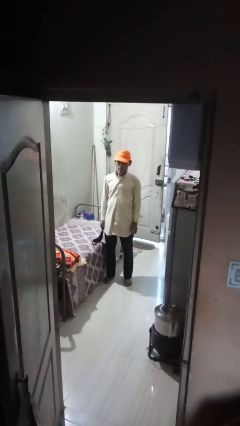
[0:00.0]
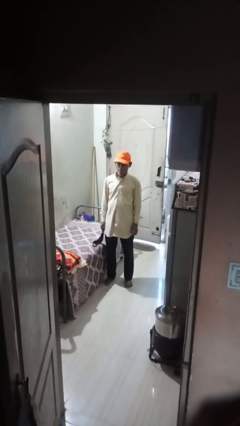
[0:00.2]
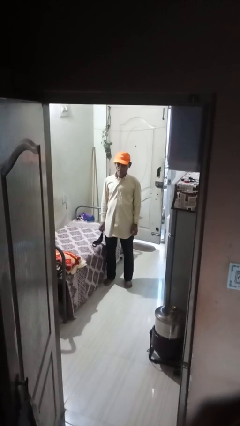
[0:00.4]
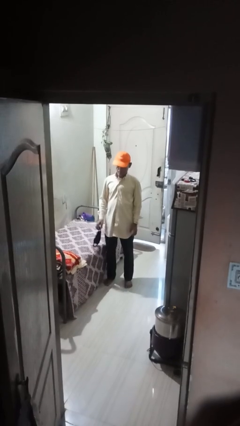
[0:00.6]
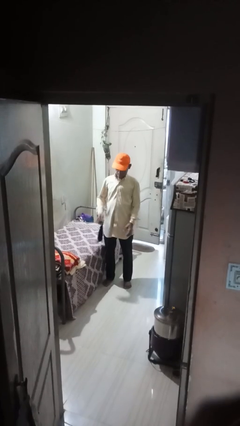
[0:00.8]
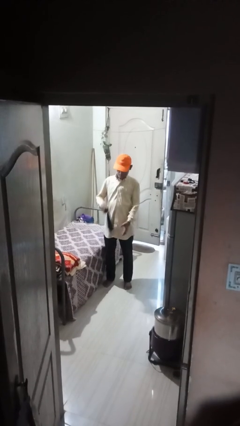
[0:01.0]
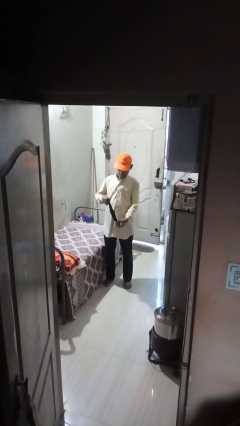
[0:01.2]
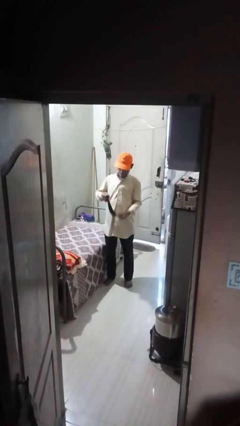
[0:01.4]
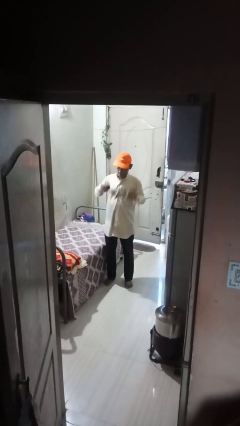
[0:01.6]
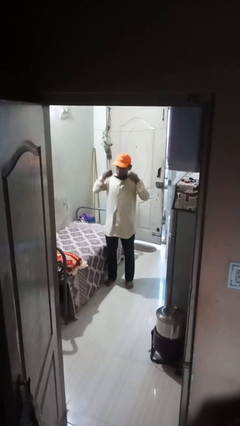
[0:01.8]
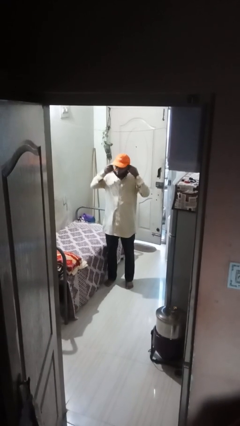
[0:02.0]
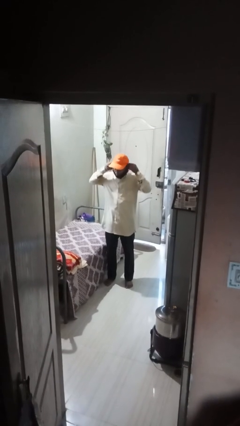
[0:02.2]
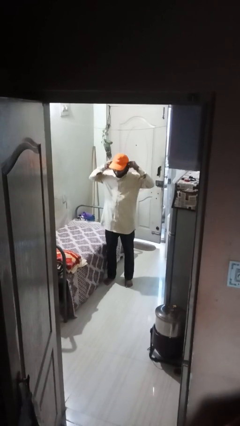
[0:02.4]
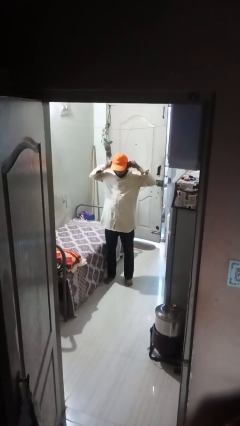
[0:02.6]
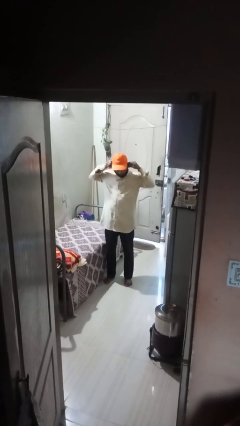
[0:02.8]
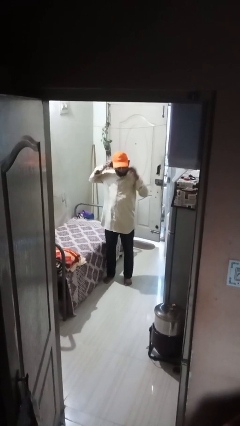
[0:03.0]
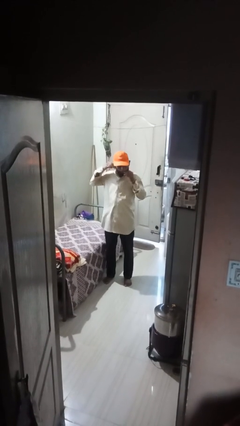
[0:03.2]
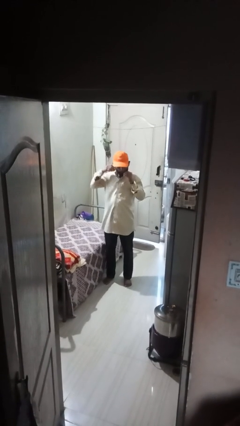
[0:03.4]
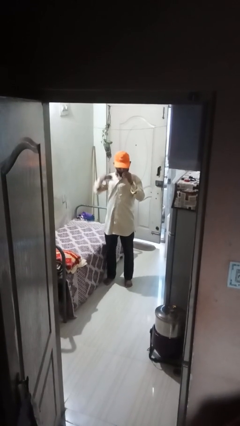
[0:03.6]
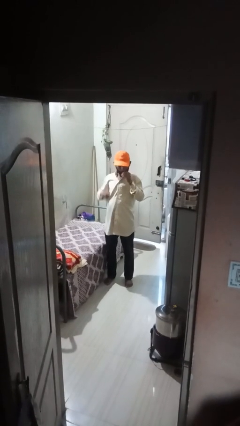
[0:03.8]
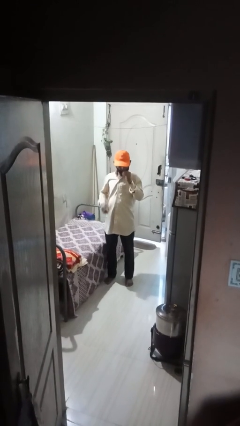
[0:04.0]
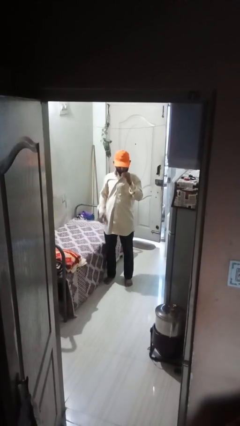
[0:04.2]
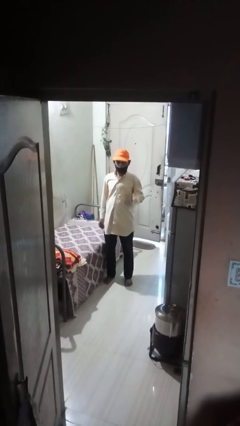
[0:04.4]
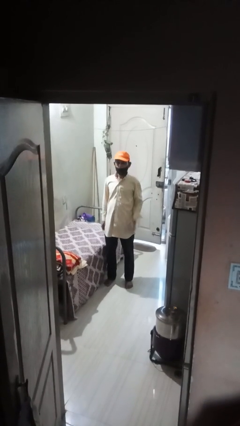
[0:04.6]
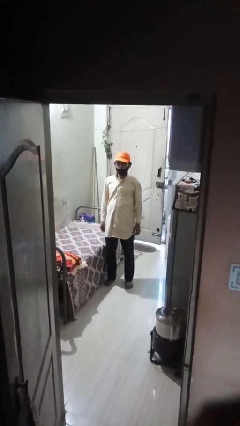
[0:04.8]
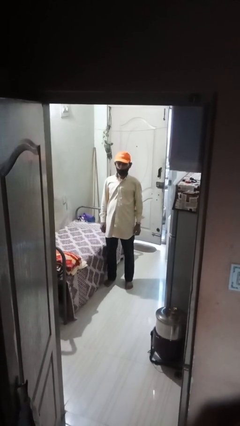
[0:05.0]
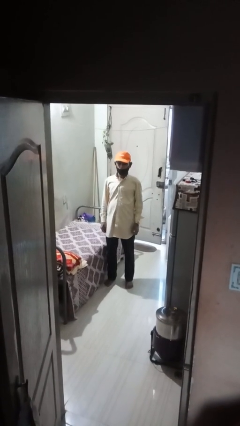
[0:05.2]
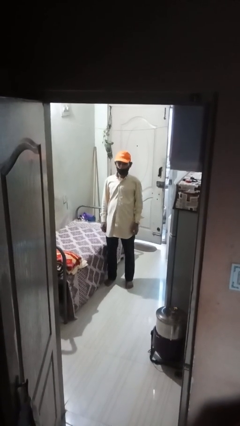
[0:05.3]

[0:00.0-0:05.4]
person puts on facemask

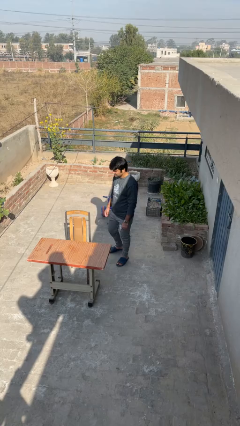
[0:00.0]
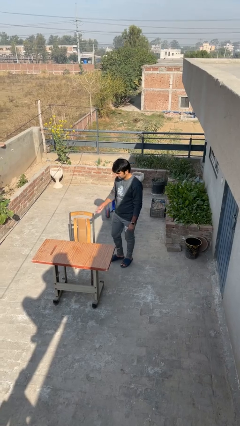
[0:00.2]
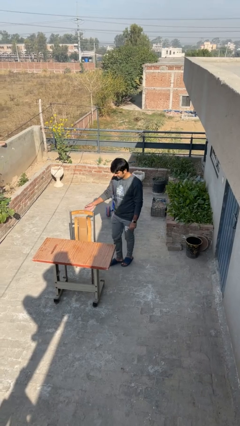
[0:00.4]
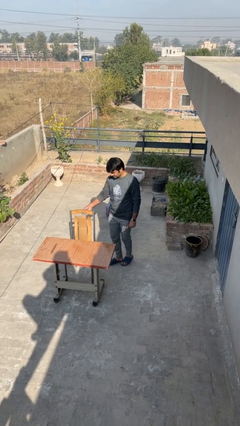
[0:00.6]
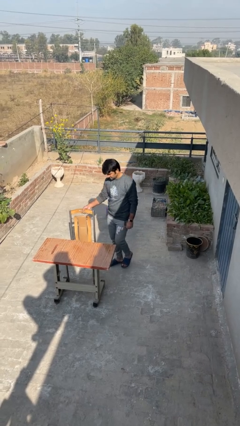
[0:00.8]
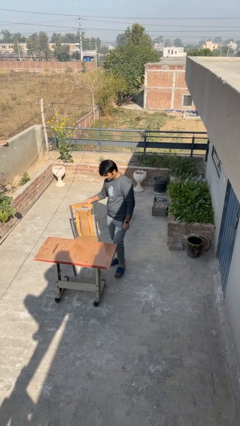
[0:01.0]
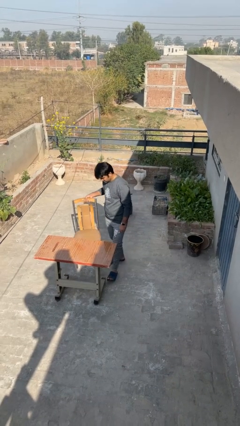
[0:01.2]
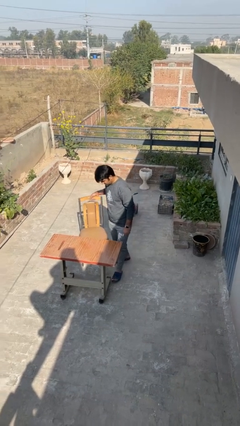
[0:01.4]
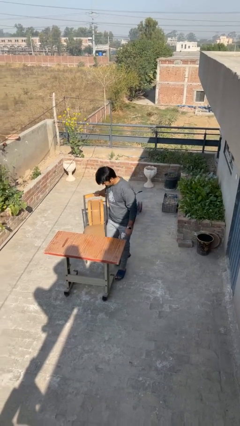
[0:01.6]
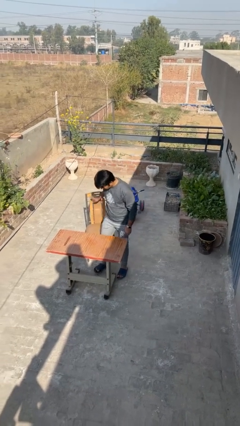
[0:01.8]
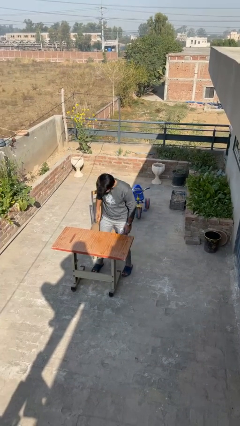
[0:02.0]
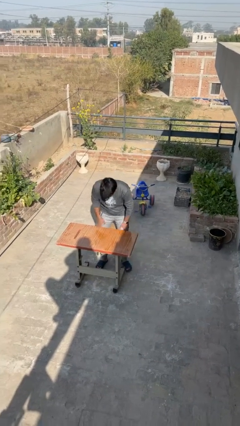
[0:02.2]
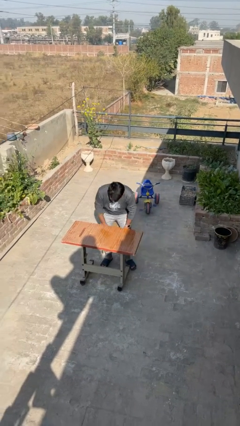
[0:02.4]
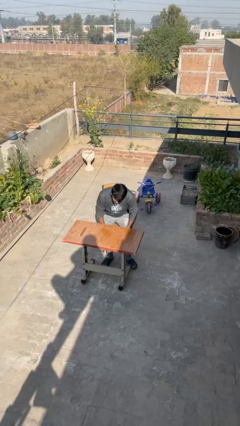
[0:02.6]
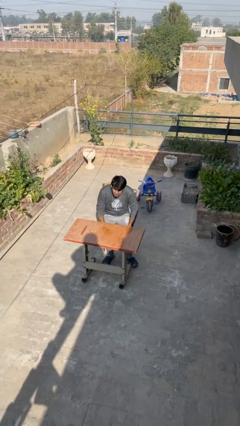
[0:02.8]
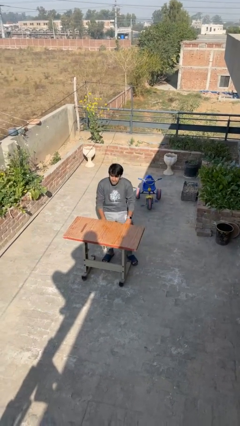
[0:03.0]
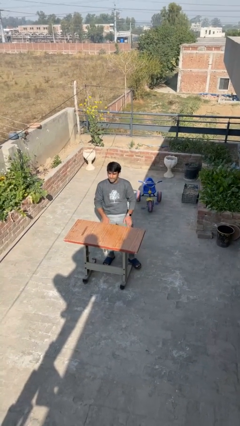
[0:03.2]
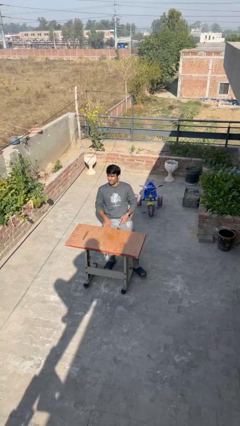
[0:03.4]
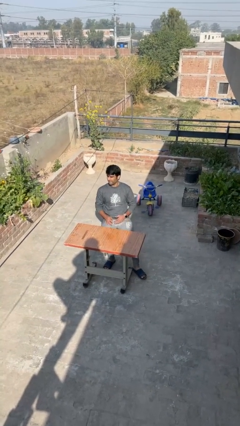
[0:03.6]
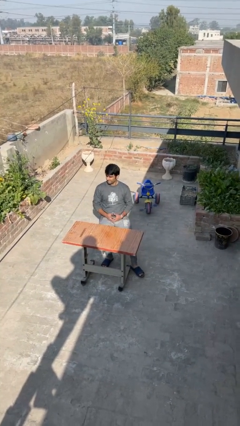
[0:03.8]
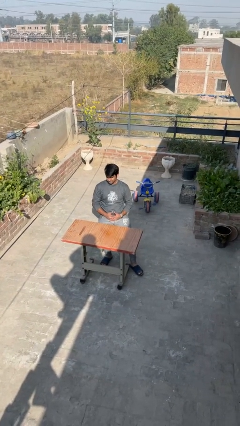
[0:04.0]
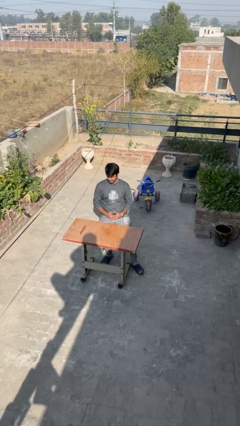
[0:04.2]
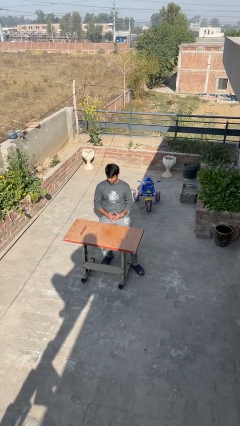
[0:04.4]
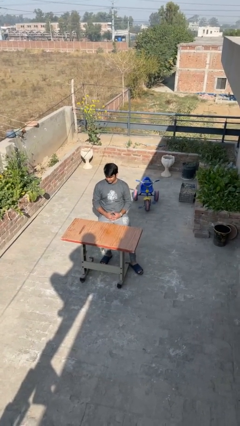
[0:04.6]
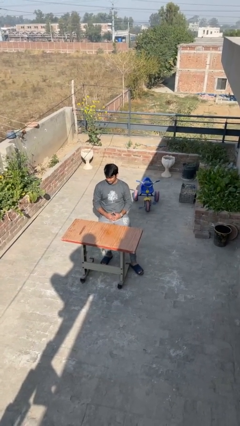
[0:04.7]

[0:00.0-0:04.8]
person sits down

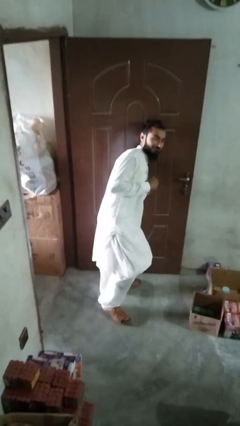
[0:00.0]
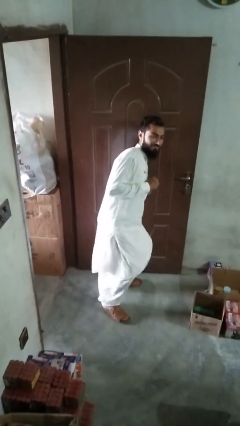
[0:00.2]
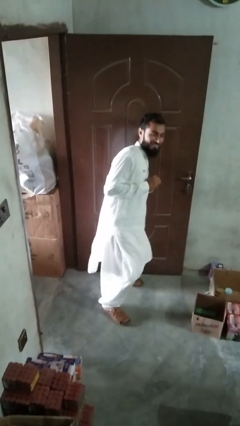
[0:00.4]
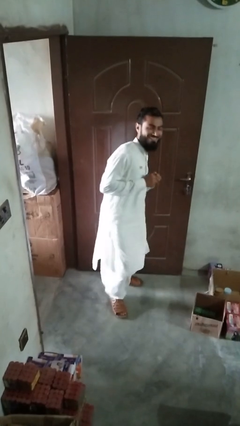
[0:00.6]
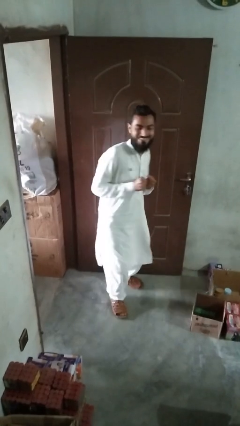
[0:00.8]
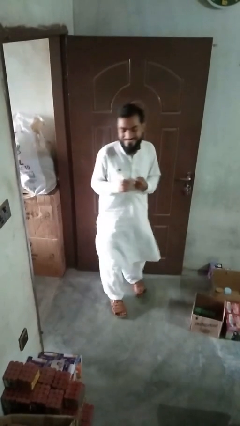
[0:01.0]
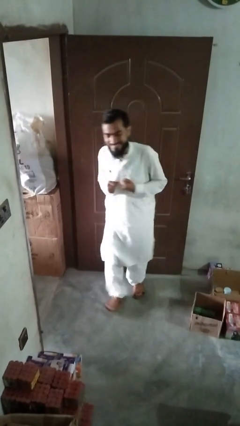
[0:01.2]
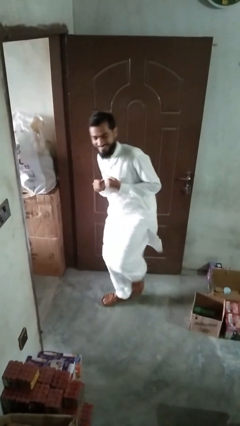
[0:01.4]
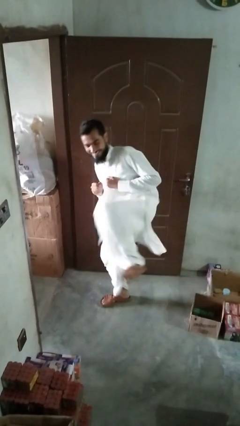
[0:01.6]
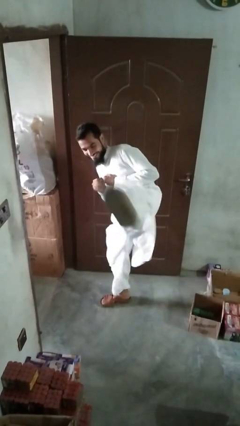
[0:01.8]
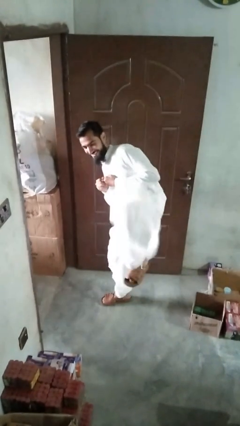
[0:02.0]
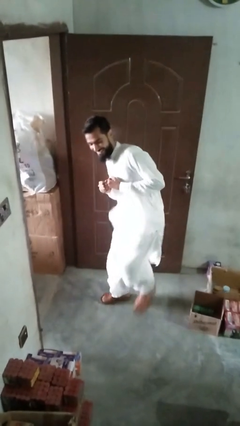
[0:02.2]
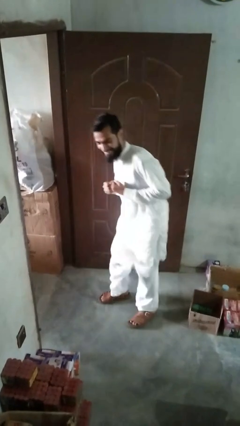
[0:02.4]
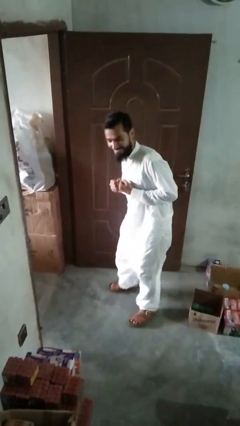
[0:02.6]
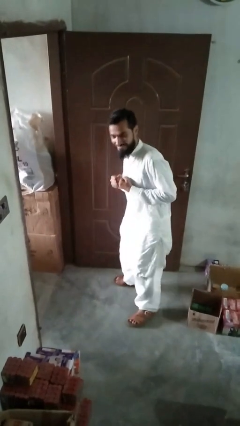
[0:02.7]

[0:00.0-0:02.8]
person karate kicks

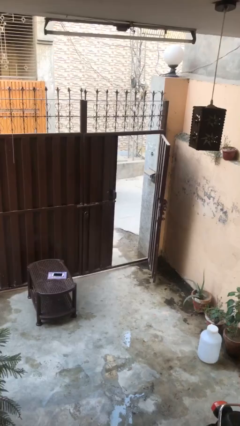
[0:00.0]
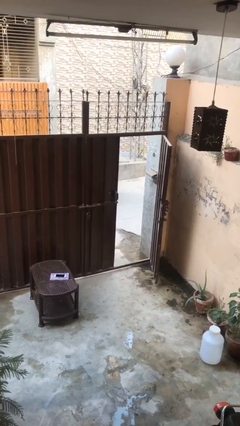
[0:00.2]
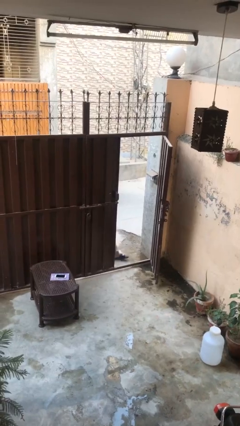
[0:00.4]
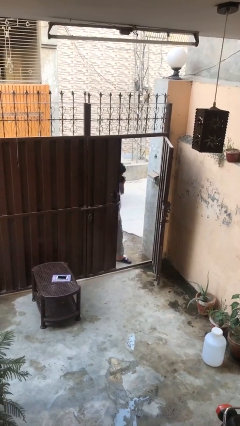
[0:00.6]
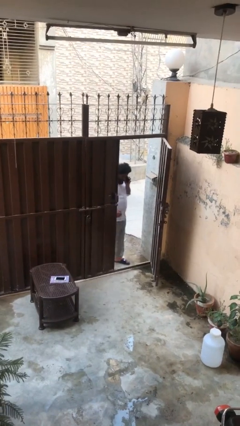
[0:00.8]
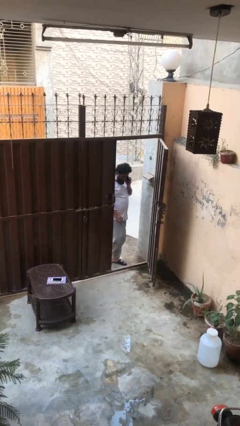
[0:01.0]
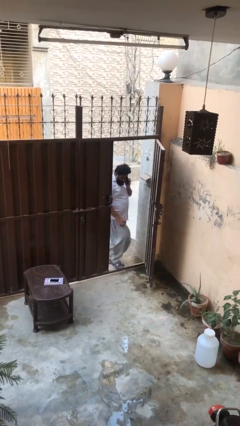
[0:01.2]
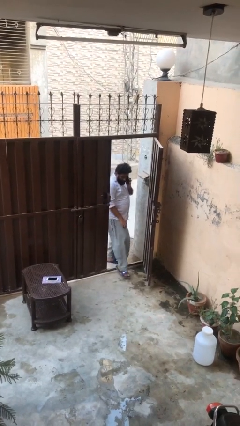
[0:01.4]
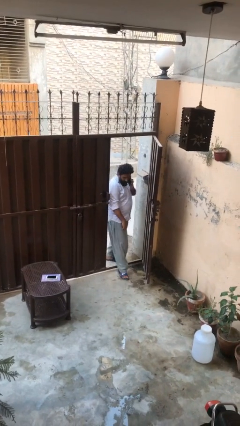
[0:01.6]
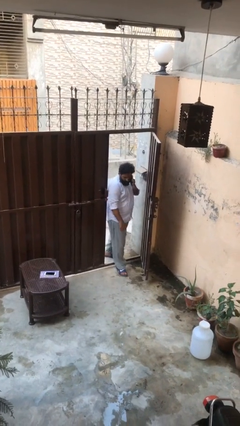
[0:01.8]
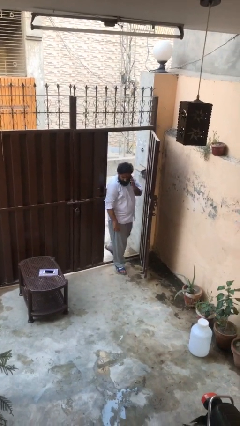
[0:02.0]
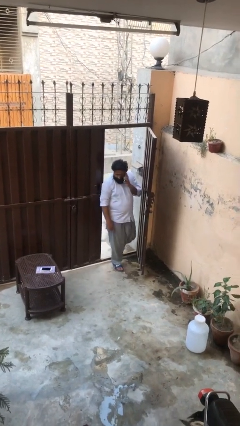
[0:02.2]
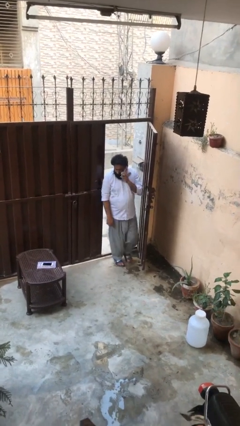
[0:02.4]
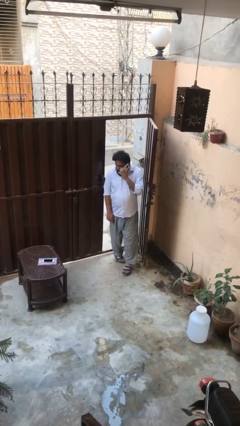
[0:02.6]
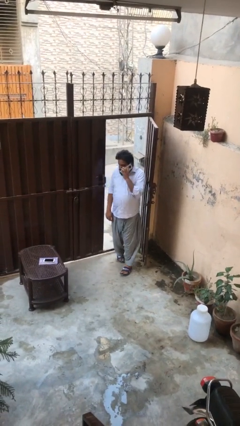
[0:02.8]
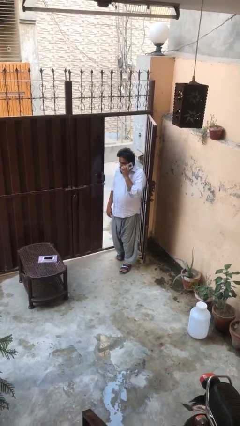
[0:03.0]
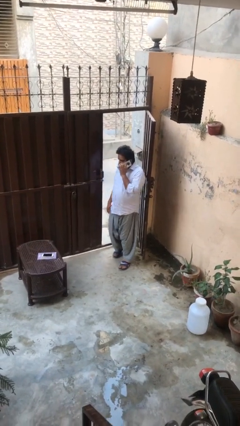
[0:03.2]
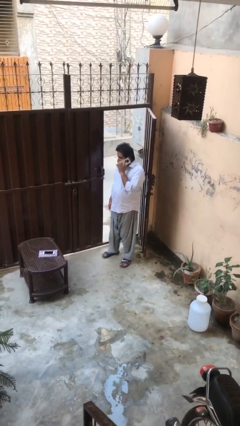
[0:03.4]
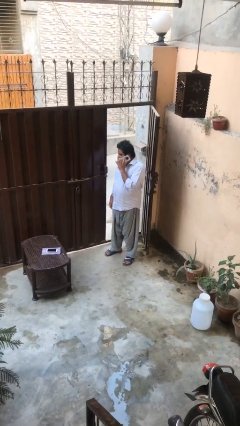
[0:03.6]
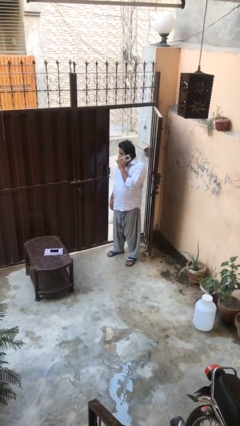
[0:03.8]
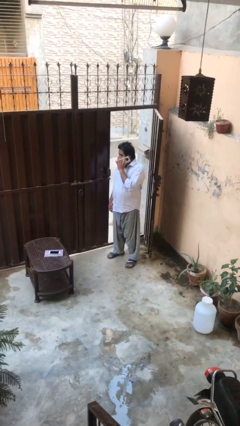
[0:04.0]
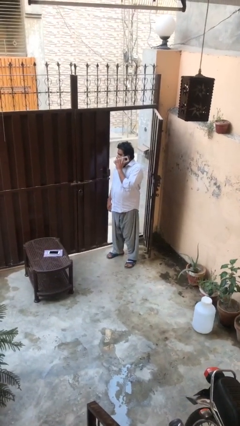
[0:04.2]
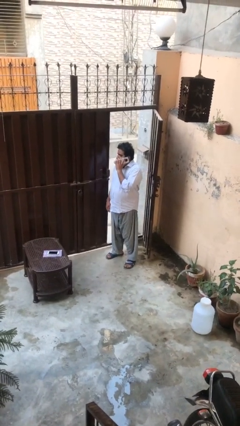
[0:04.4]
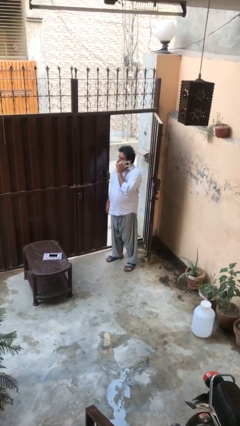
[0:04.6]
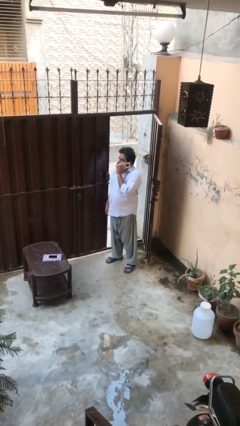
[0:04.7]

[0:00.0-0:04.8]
person enters scene through structure
